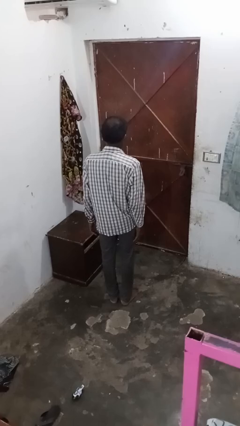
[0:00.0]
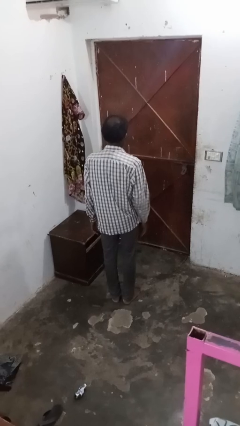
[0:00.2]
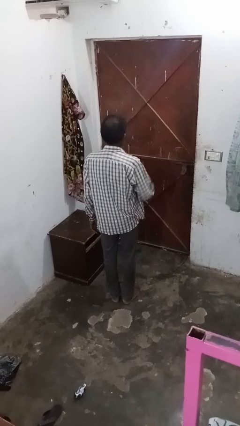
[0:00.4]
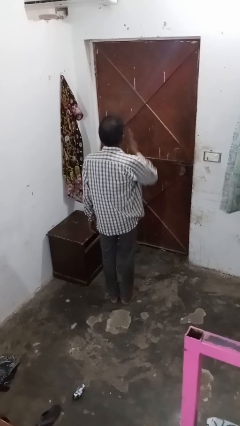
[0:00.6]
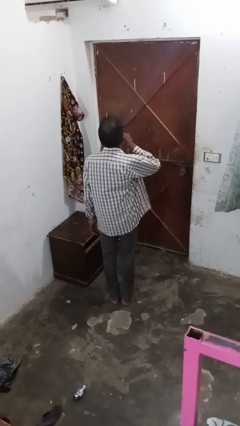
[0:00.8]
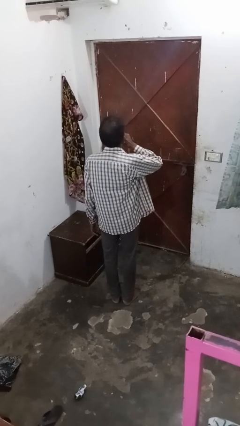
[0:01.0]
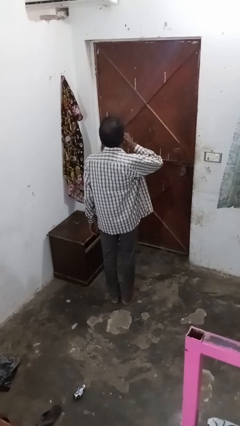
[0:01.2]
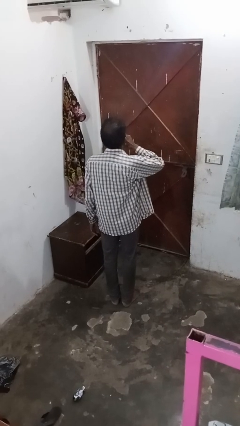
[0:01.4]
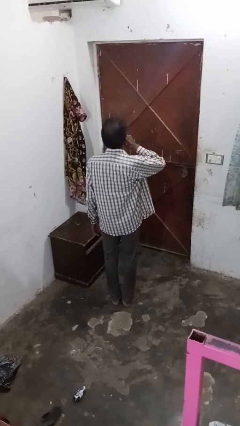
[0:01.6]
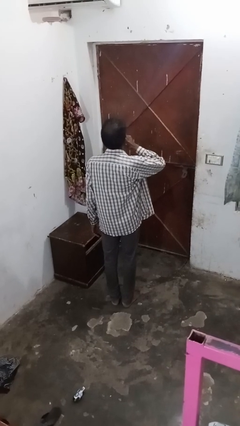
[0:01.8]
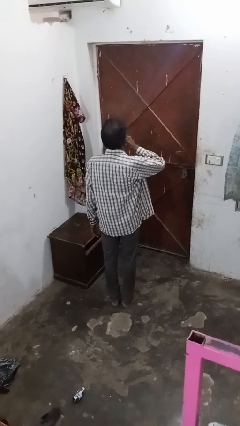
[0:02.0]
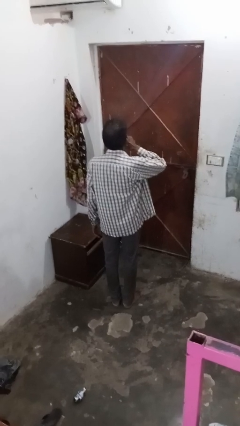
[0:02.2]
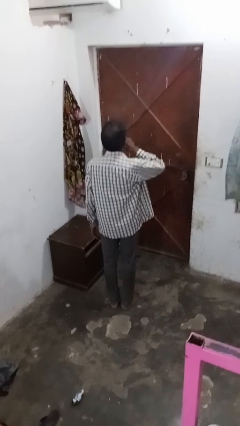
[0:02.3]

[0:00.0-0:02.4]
person gestures be quiet

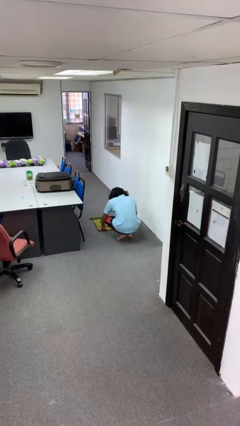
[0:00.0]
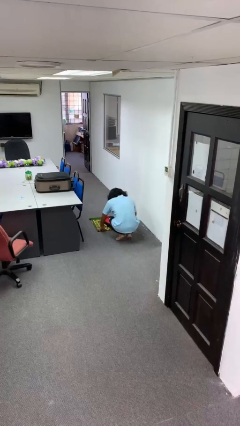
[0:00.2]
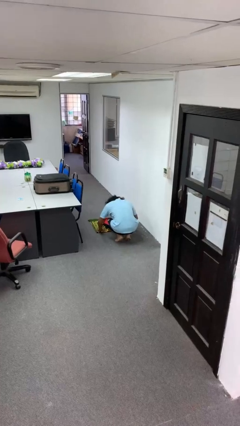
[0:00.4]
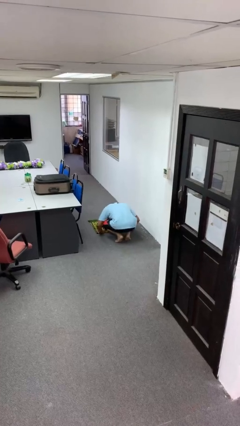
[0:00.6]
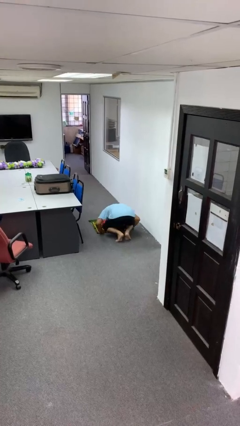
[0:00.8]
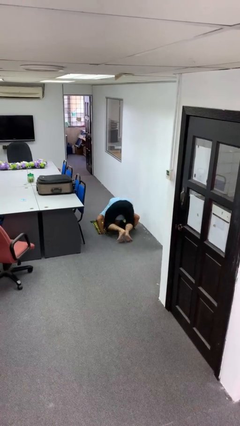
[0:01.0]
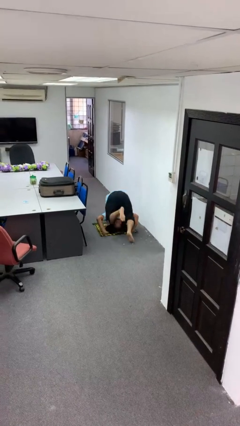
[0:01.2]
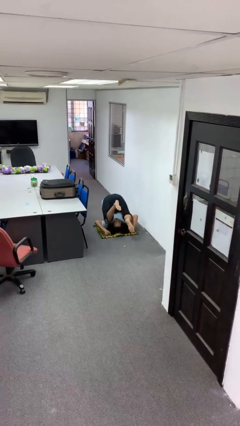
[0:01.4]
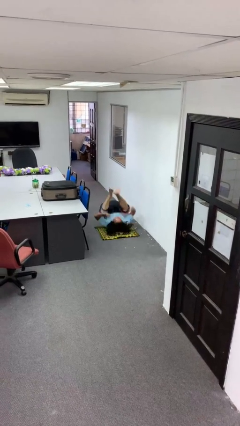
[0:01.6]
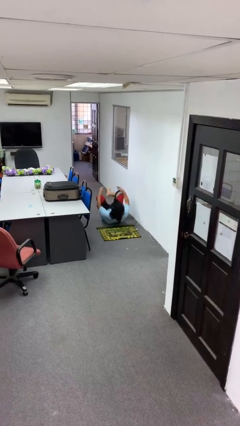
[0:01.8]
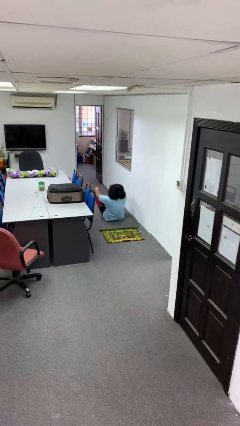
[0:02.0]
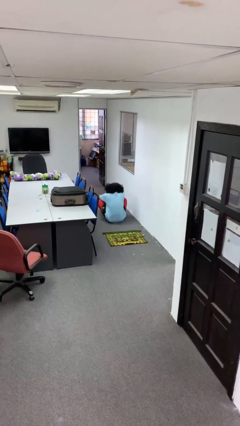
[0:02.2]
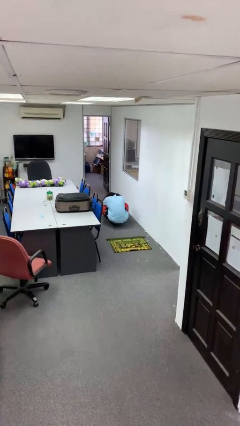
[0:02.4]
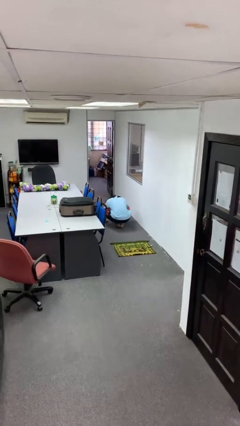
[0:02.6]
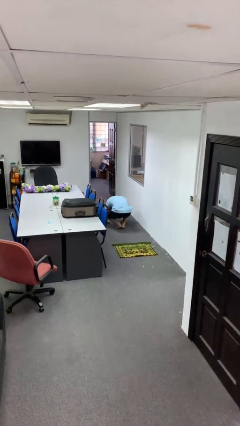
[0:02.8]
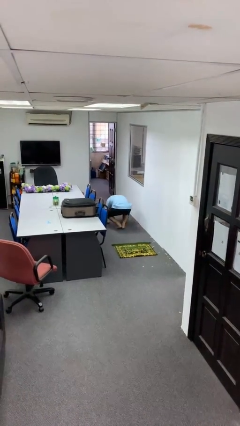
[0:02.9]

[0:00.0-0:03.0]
person somersaults

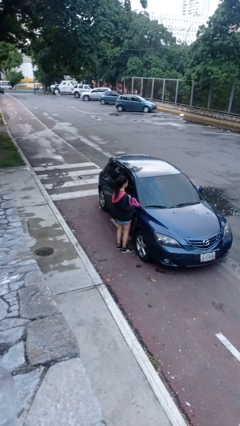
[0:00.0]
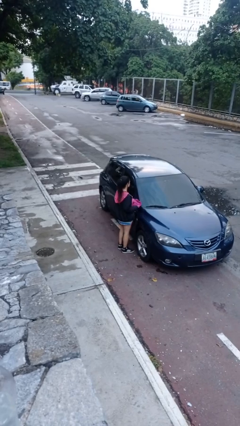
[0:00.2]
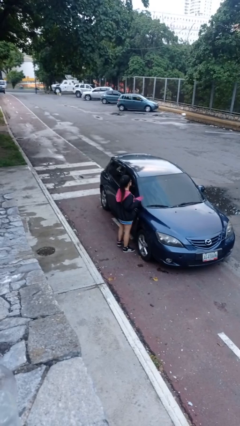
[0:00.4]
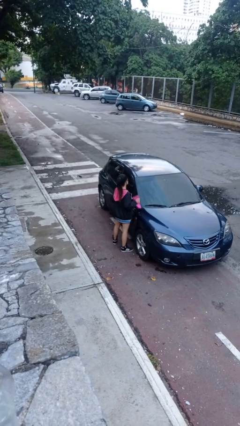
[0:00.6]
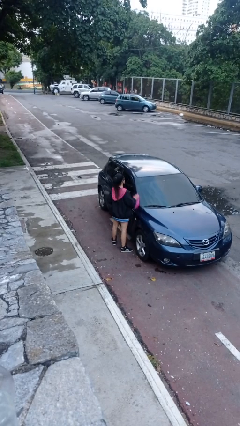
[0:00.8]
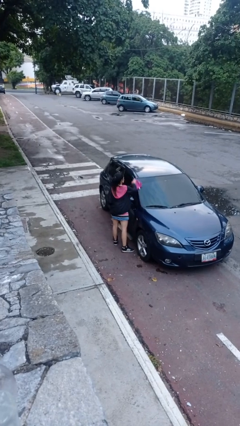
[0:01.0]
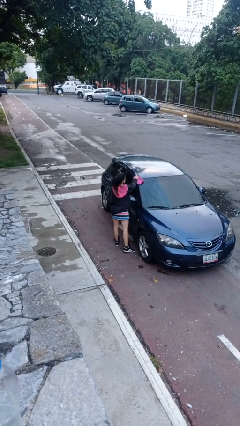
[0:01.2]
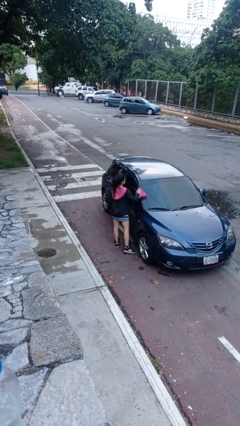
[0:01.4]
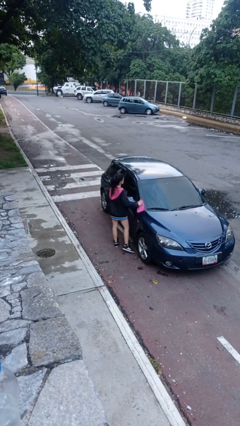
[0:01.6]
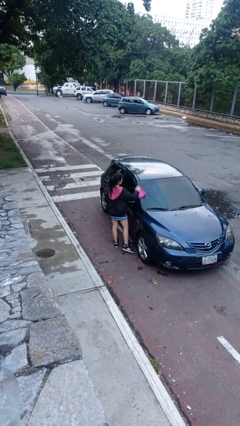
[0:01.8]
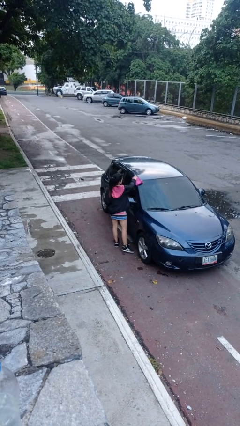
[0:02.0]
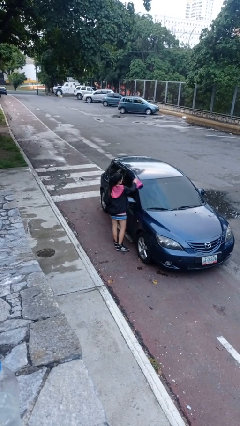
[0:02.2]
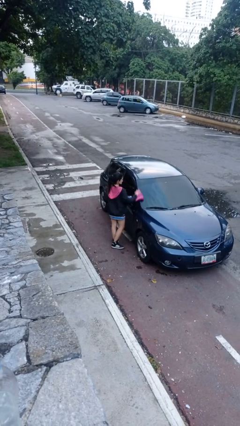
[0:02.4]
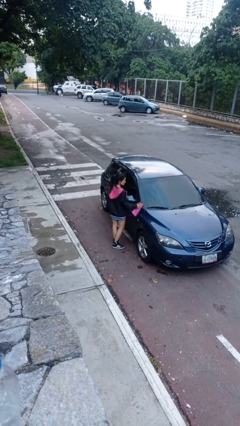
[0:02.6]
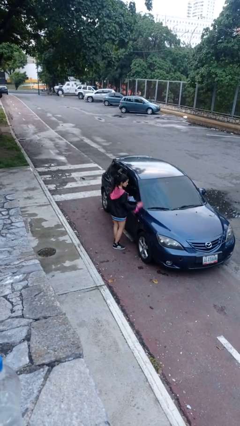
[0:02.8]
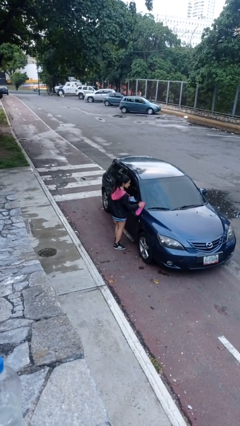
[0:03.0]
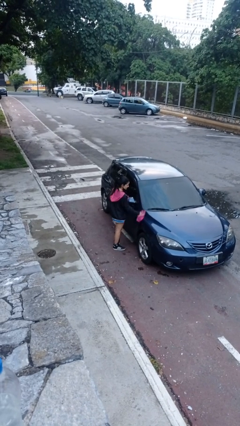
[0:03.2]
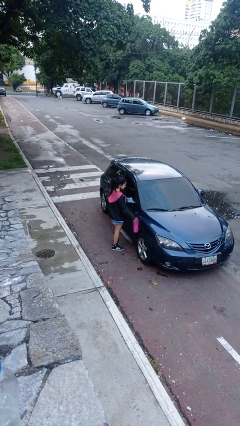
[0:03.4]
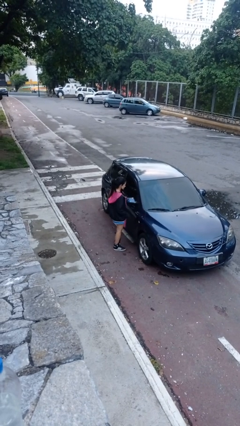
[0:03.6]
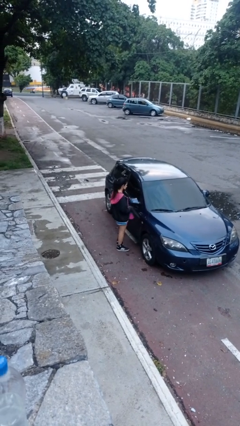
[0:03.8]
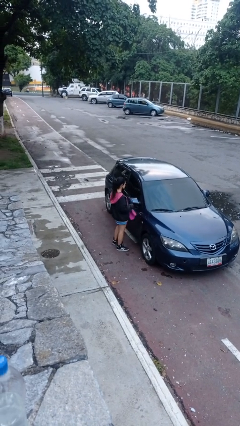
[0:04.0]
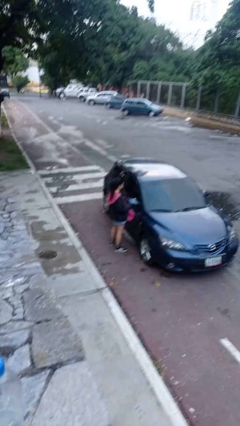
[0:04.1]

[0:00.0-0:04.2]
person polishes car with rag

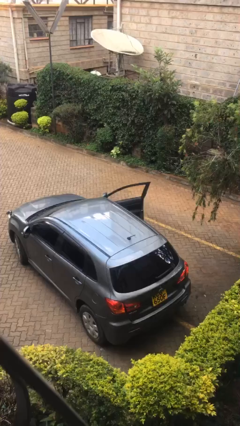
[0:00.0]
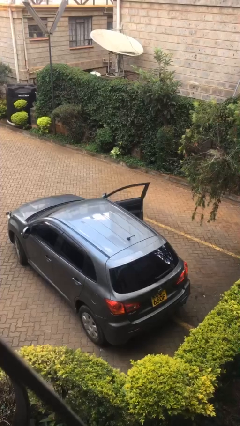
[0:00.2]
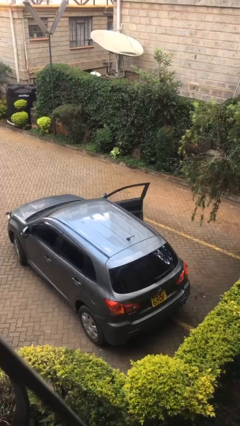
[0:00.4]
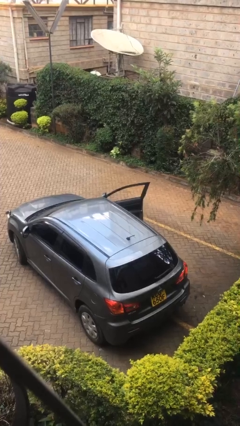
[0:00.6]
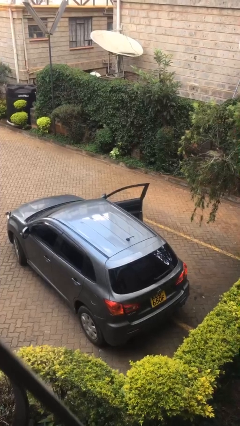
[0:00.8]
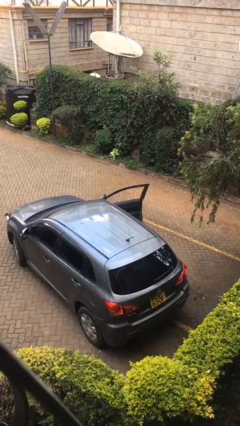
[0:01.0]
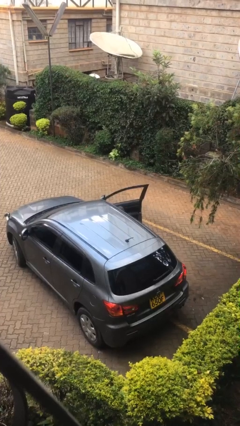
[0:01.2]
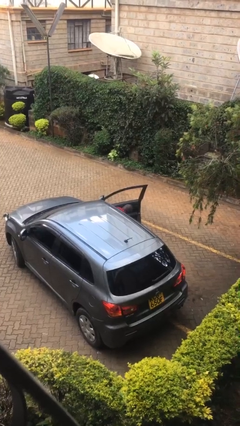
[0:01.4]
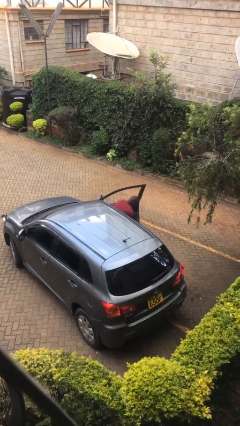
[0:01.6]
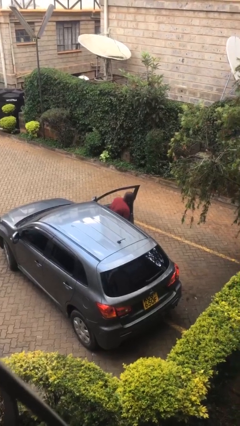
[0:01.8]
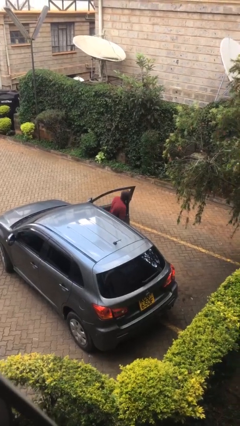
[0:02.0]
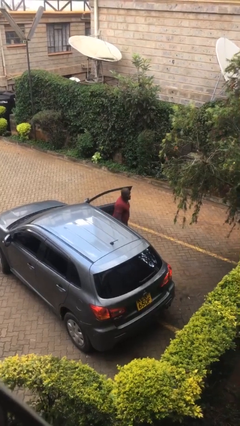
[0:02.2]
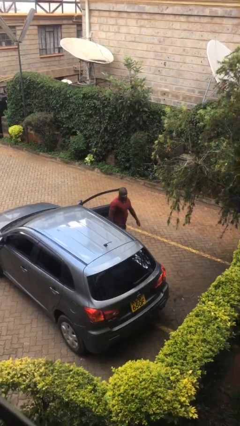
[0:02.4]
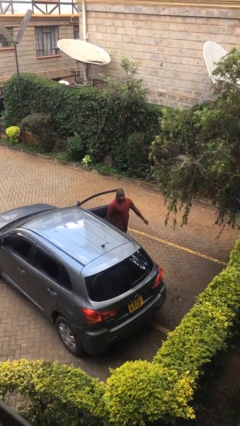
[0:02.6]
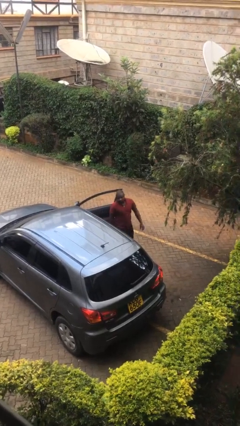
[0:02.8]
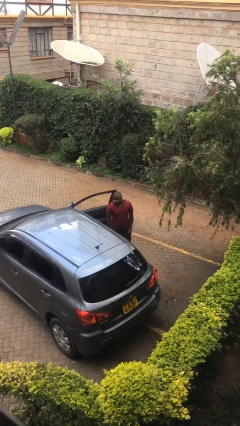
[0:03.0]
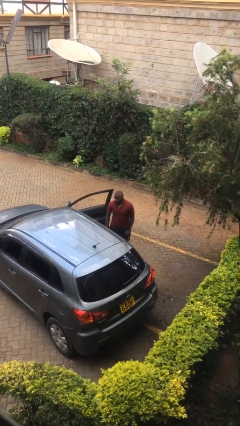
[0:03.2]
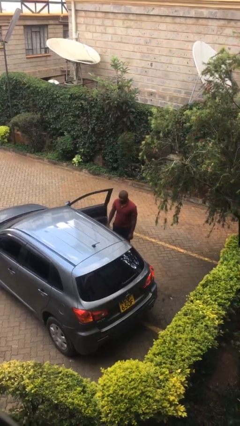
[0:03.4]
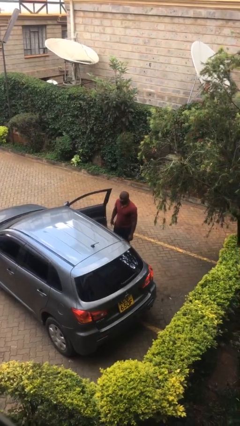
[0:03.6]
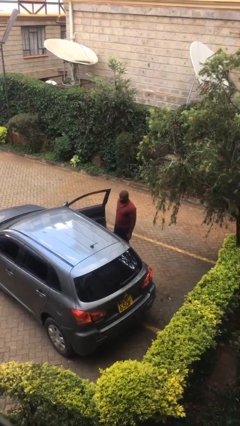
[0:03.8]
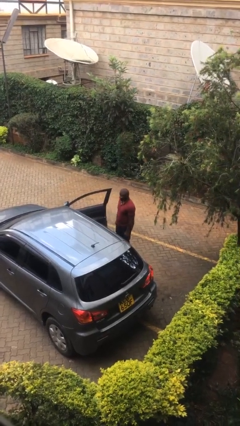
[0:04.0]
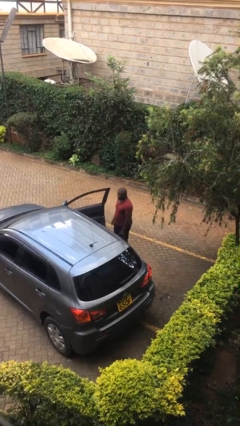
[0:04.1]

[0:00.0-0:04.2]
person exits car

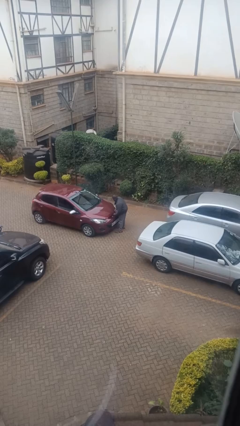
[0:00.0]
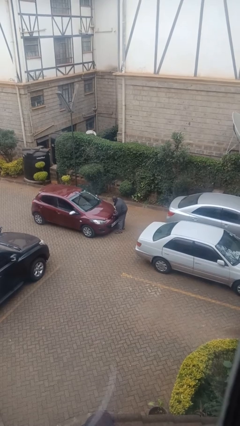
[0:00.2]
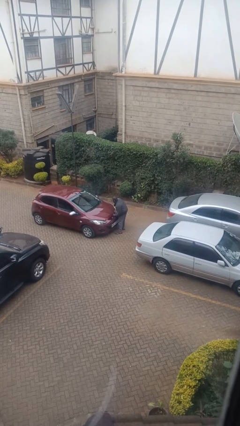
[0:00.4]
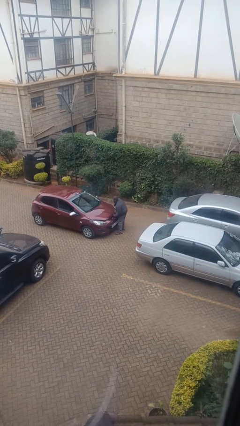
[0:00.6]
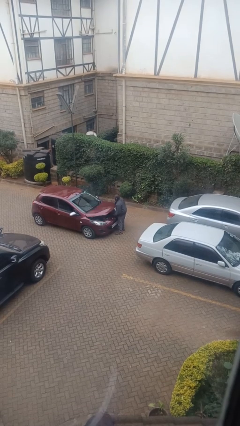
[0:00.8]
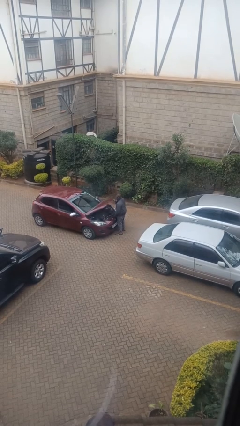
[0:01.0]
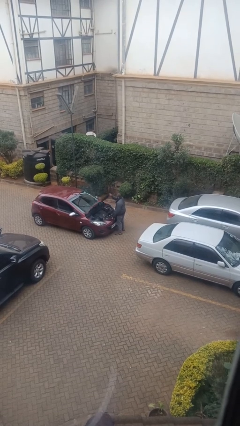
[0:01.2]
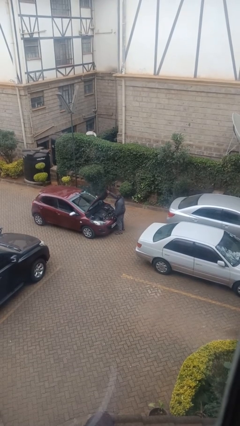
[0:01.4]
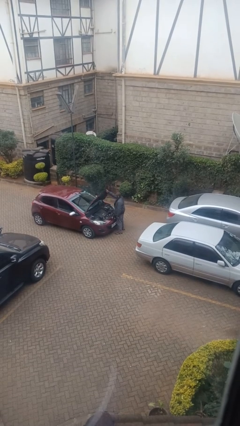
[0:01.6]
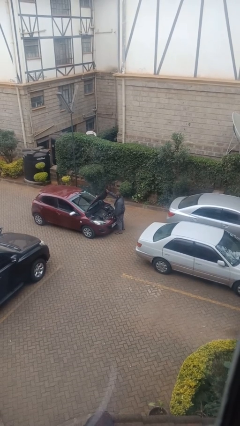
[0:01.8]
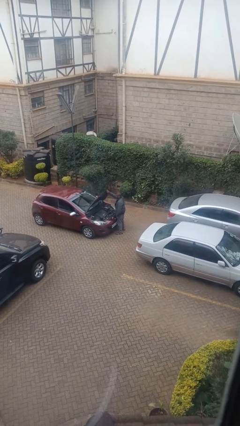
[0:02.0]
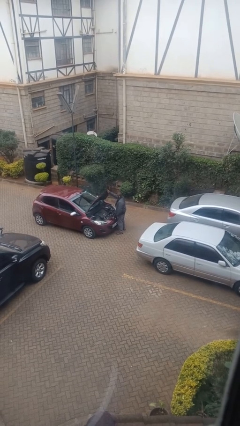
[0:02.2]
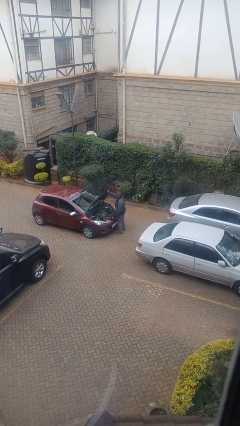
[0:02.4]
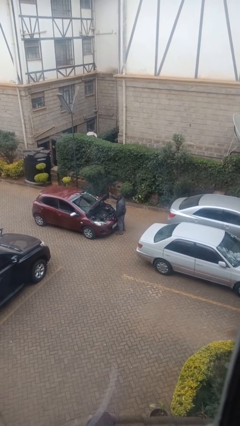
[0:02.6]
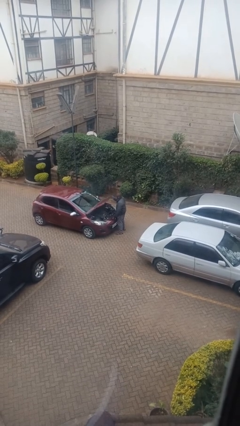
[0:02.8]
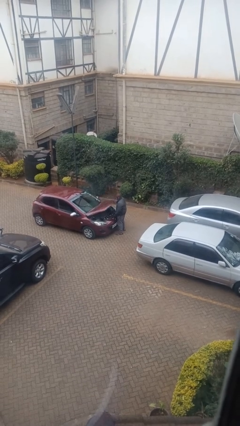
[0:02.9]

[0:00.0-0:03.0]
person opens car hood

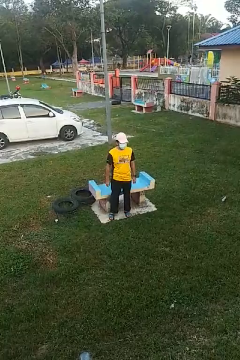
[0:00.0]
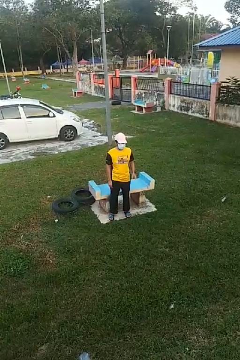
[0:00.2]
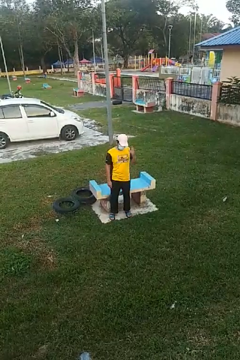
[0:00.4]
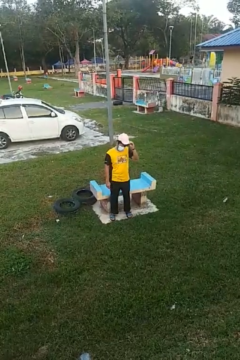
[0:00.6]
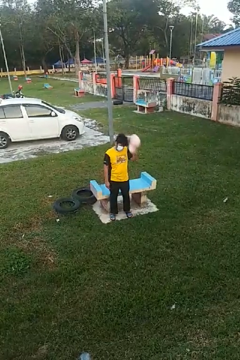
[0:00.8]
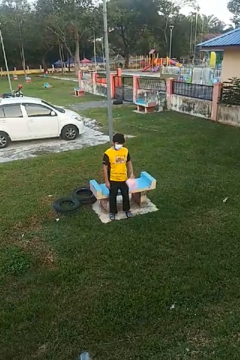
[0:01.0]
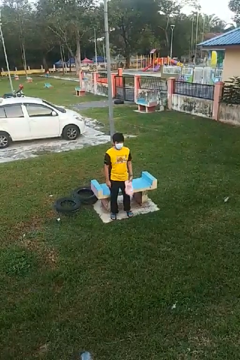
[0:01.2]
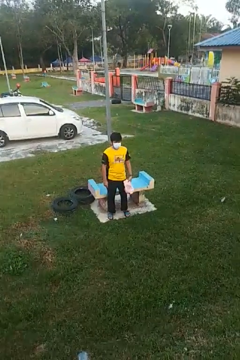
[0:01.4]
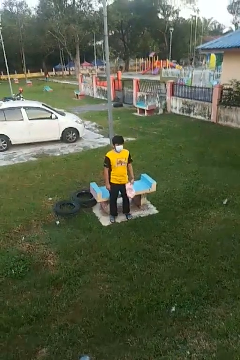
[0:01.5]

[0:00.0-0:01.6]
person takes off hat
